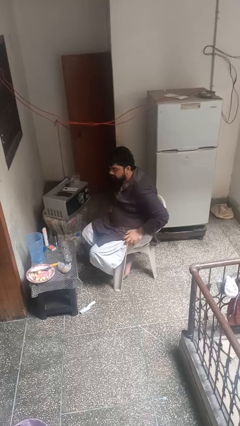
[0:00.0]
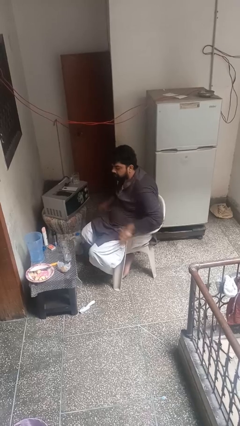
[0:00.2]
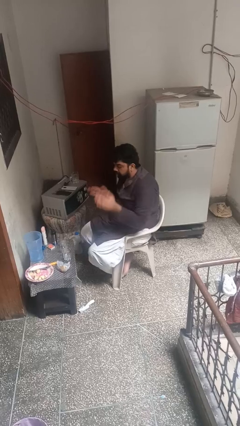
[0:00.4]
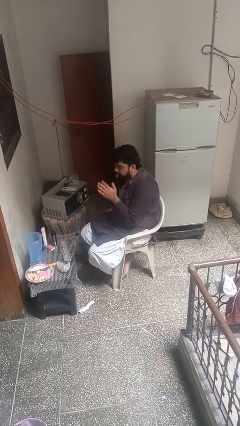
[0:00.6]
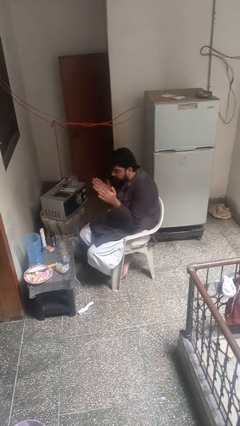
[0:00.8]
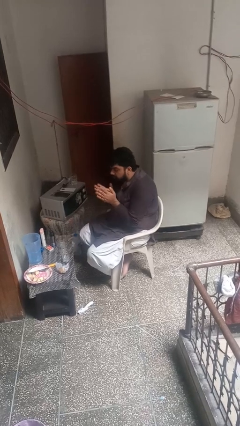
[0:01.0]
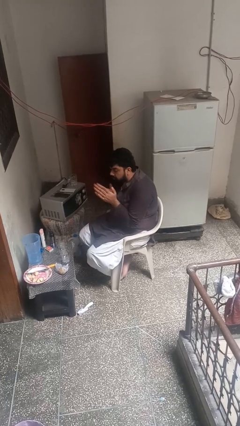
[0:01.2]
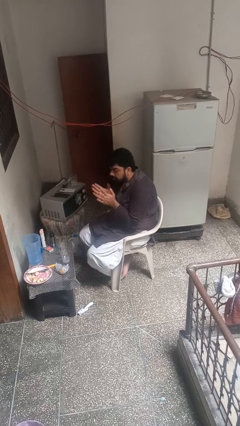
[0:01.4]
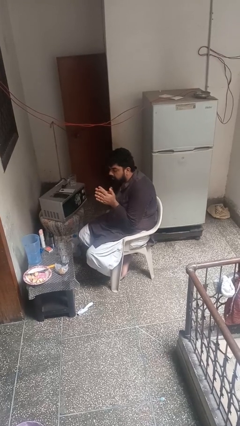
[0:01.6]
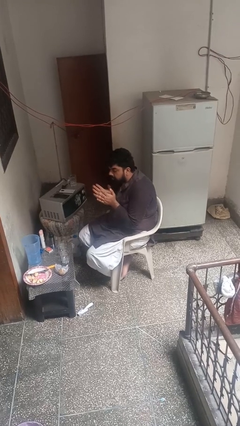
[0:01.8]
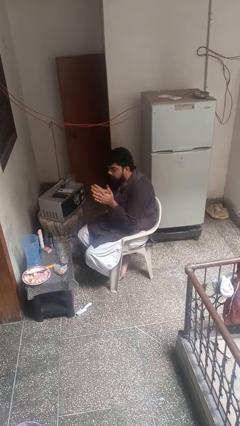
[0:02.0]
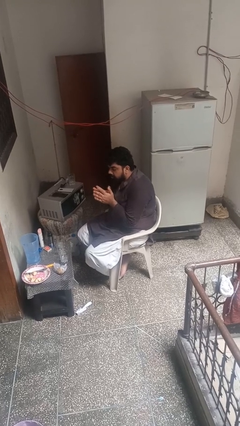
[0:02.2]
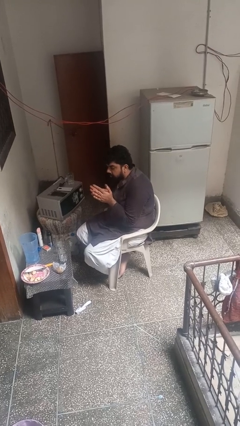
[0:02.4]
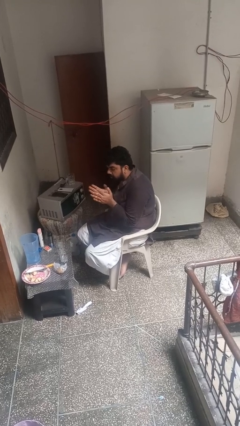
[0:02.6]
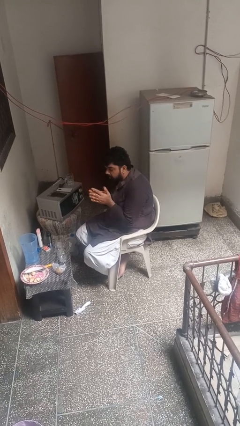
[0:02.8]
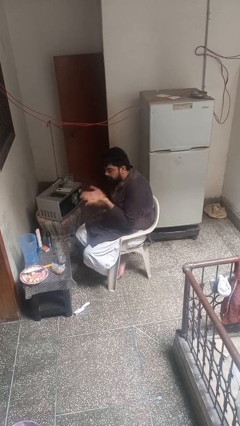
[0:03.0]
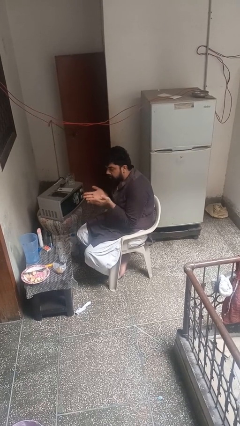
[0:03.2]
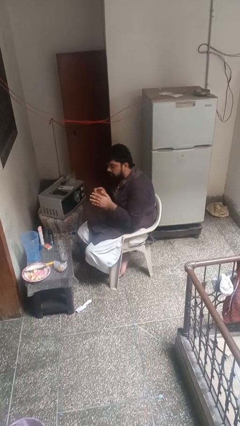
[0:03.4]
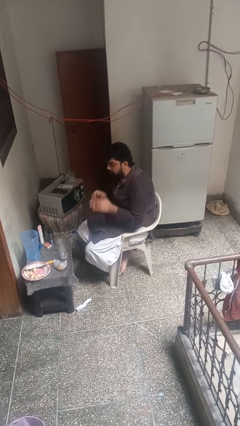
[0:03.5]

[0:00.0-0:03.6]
person claps hands

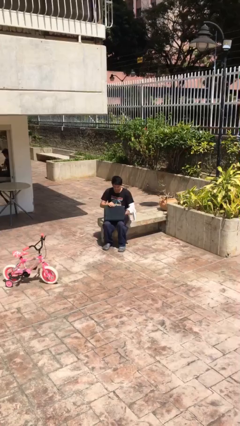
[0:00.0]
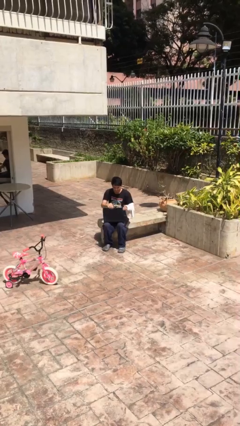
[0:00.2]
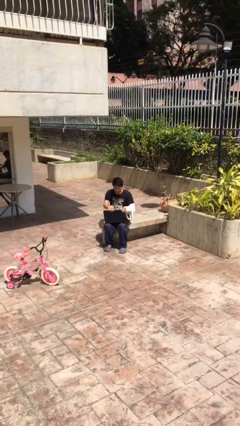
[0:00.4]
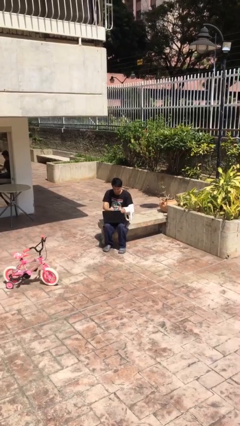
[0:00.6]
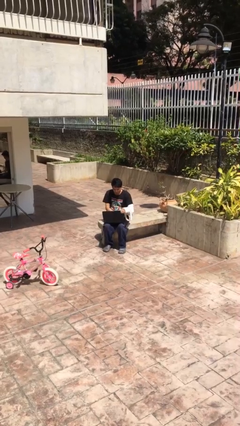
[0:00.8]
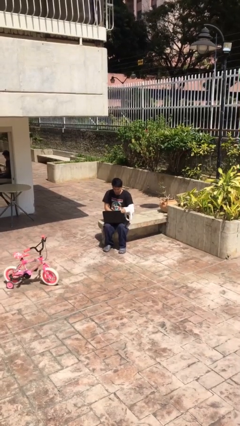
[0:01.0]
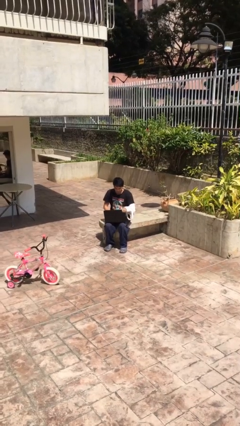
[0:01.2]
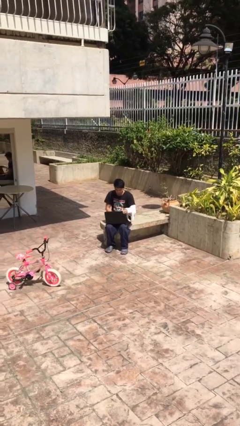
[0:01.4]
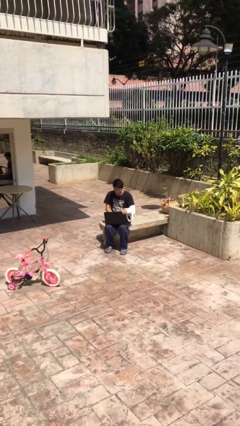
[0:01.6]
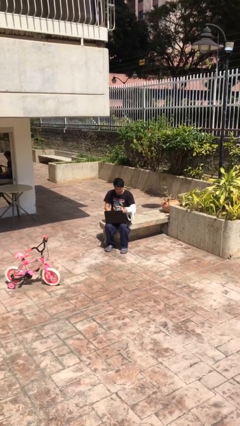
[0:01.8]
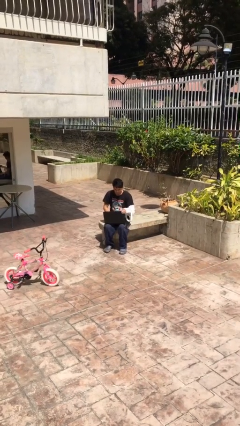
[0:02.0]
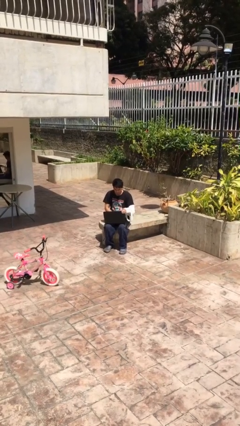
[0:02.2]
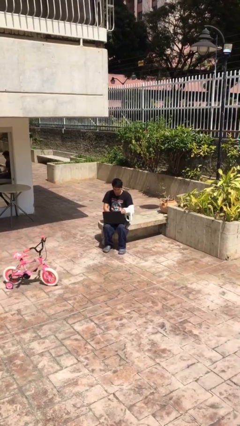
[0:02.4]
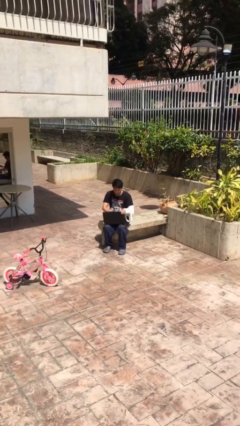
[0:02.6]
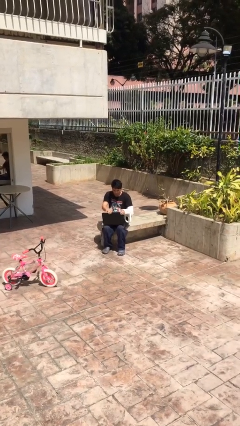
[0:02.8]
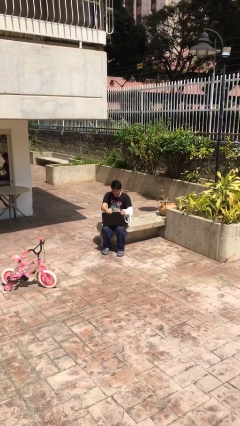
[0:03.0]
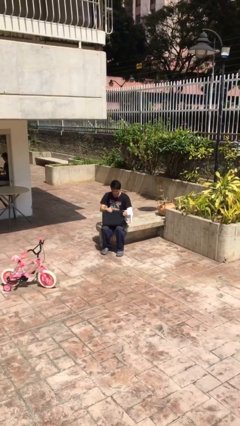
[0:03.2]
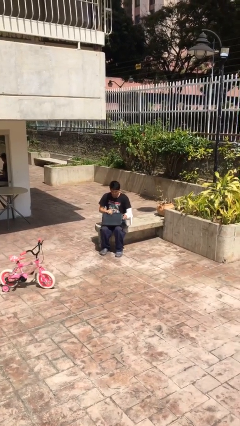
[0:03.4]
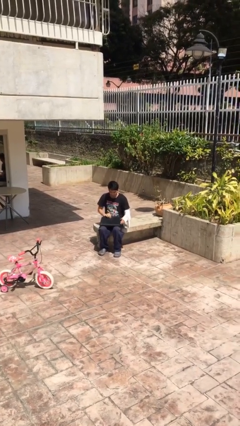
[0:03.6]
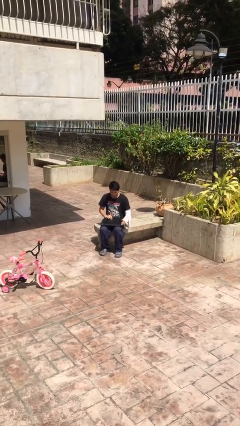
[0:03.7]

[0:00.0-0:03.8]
person interacts with laptop

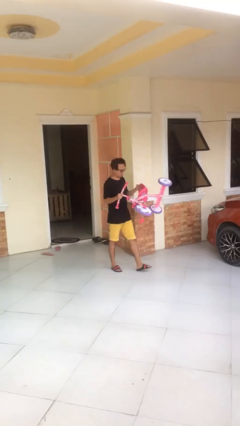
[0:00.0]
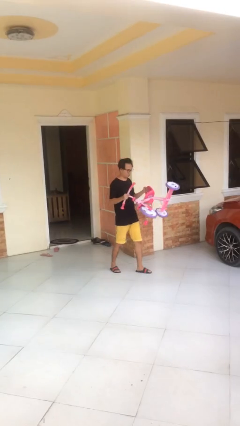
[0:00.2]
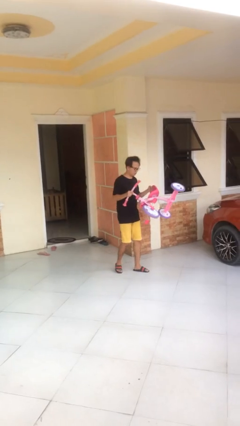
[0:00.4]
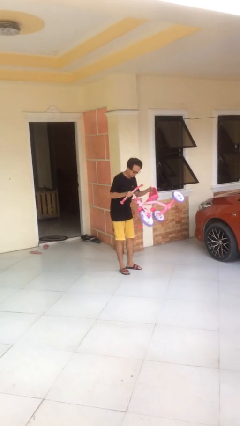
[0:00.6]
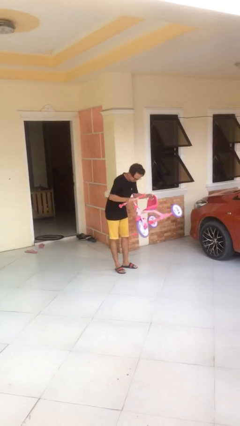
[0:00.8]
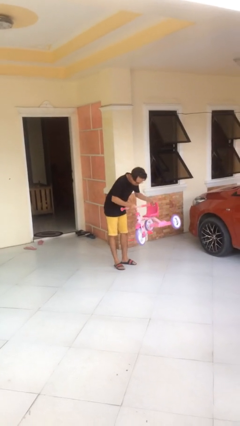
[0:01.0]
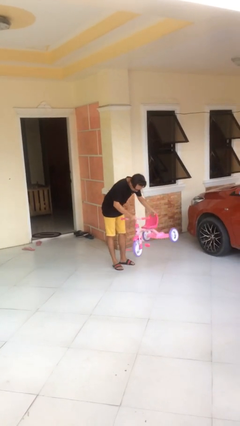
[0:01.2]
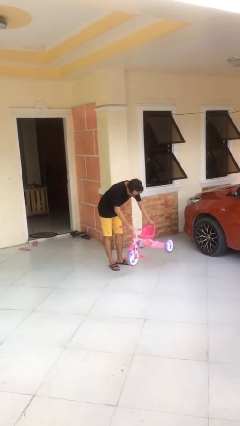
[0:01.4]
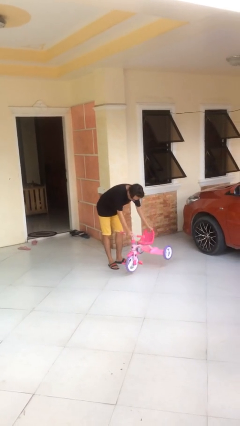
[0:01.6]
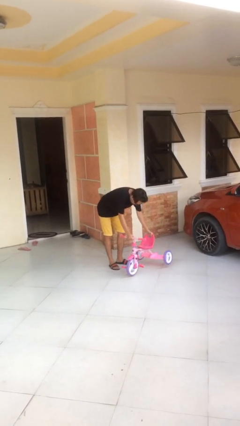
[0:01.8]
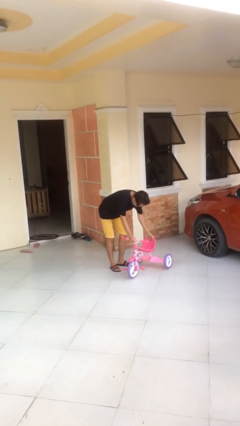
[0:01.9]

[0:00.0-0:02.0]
person puts down object on floor

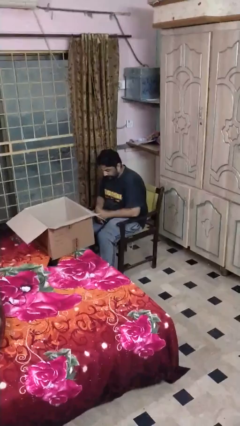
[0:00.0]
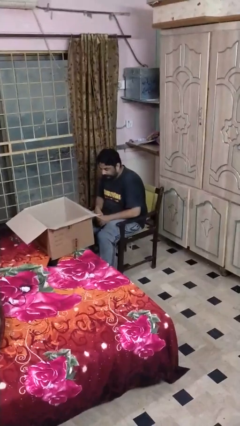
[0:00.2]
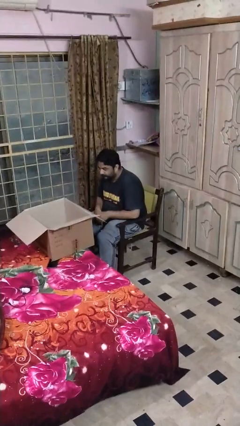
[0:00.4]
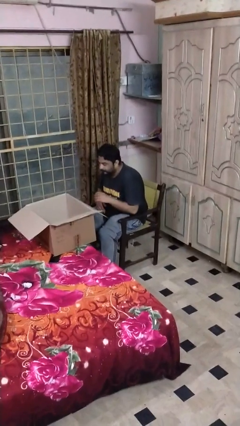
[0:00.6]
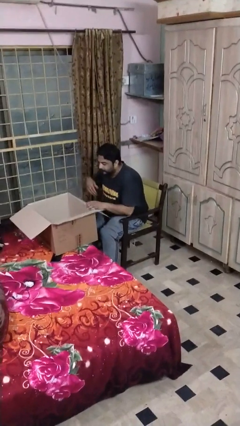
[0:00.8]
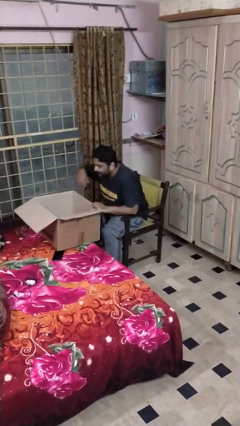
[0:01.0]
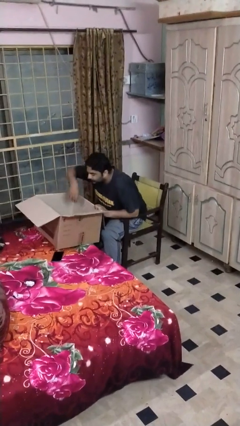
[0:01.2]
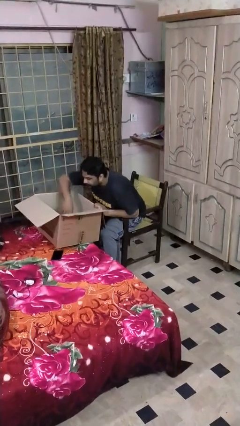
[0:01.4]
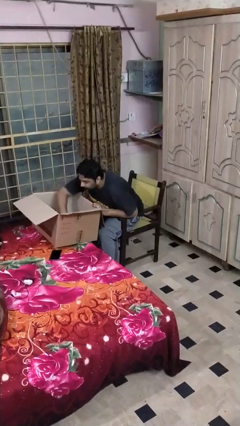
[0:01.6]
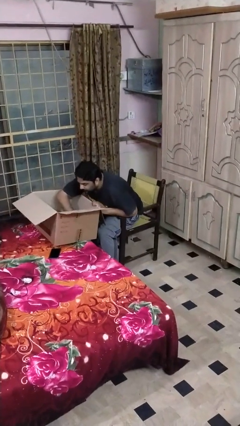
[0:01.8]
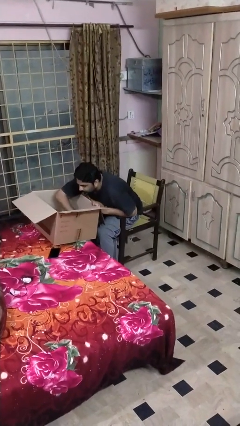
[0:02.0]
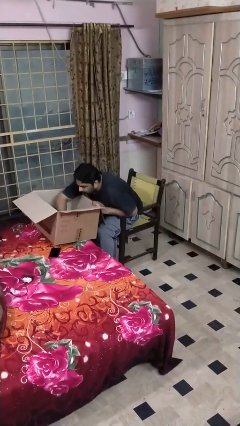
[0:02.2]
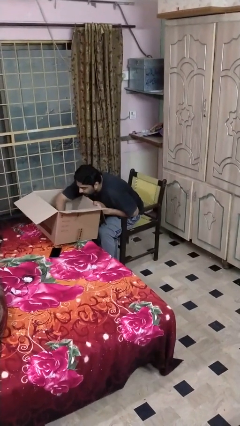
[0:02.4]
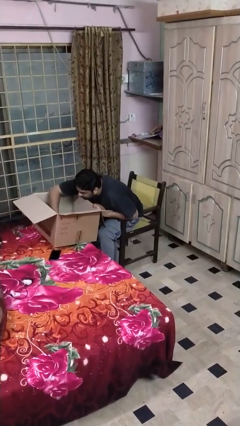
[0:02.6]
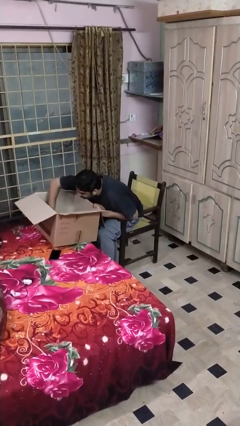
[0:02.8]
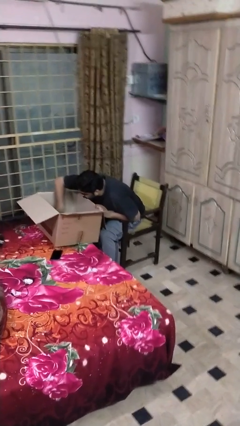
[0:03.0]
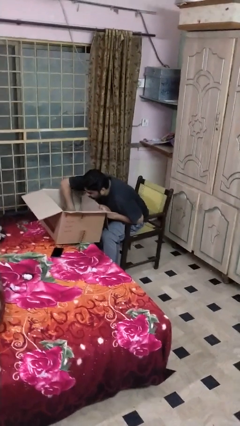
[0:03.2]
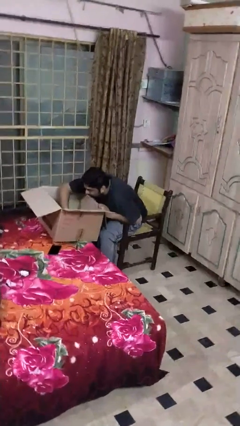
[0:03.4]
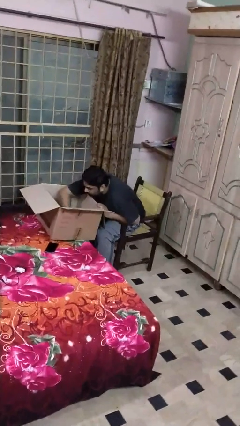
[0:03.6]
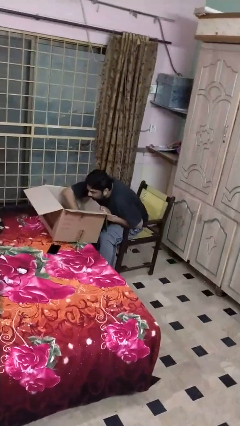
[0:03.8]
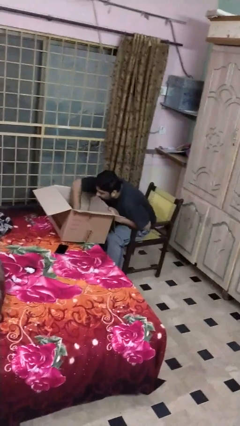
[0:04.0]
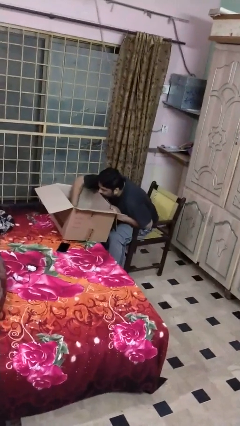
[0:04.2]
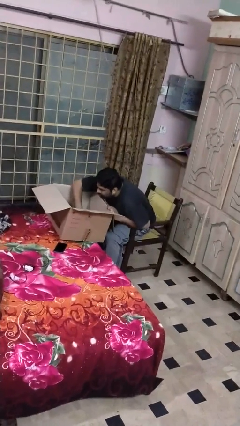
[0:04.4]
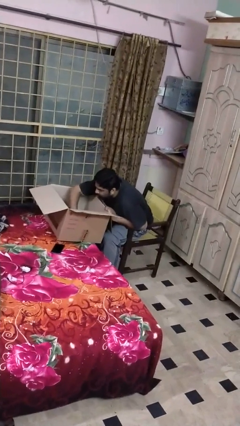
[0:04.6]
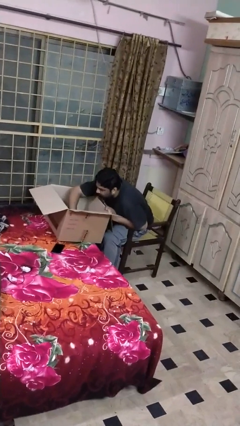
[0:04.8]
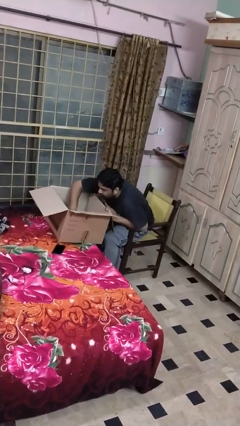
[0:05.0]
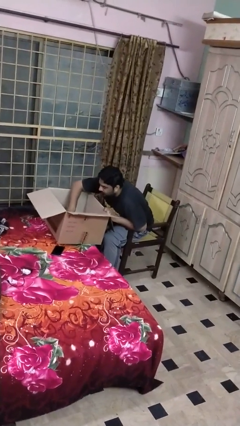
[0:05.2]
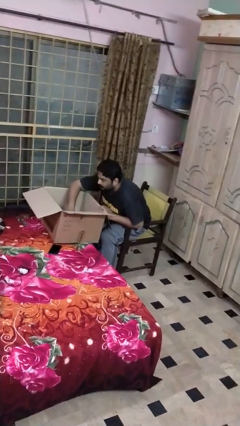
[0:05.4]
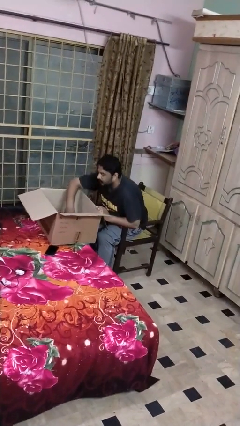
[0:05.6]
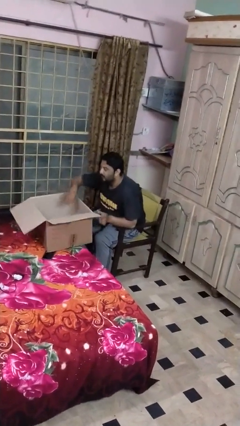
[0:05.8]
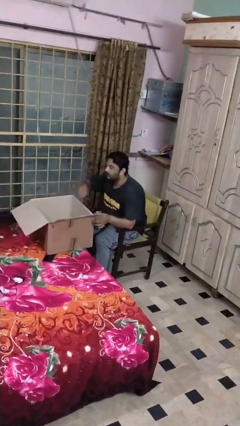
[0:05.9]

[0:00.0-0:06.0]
person searches in box

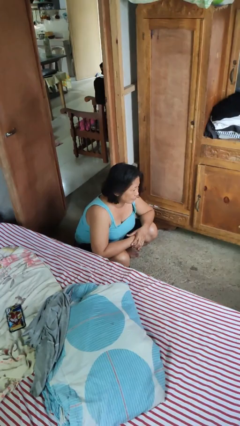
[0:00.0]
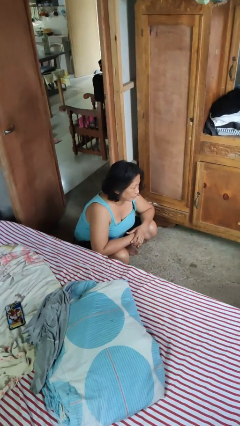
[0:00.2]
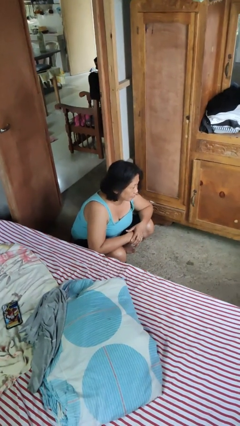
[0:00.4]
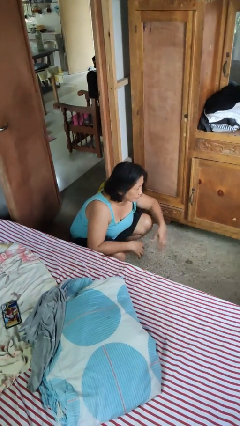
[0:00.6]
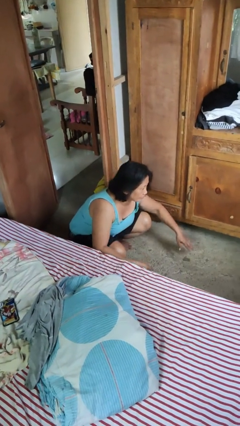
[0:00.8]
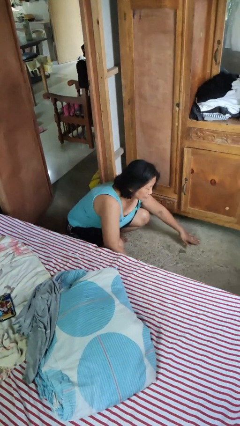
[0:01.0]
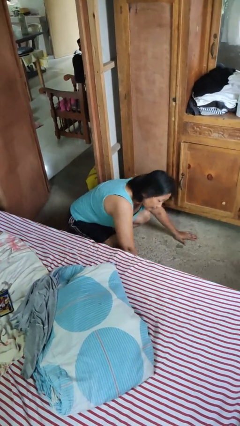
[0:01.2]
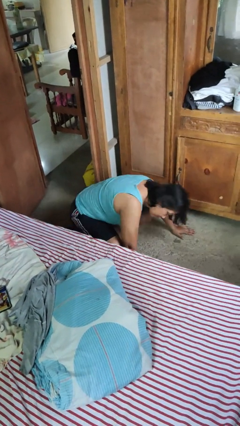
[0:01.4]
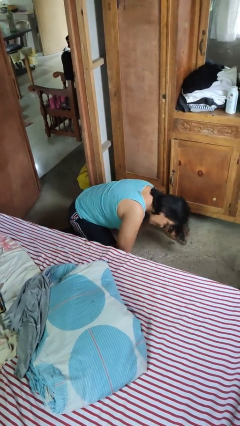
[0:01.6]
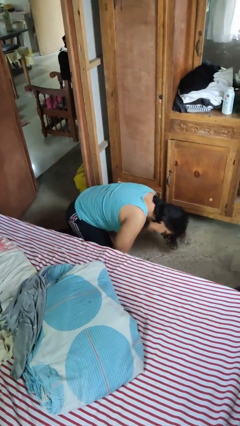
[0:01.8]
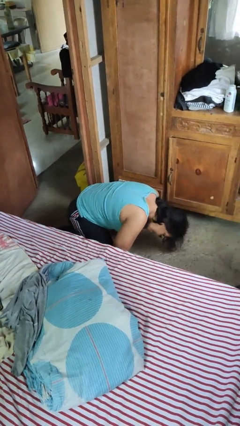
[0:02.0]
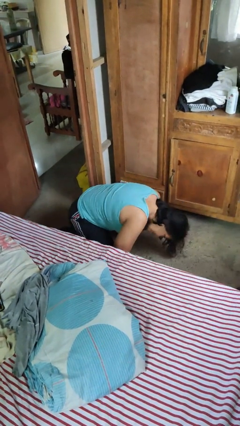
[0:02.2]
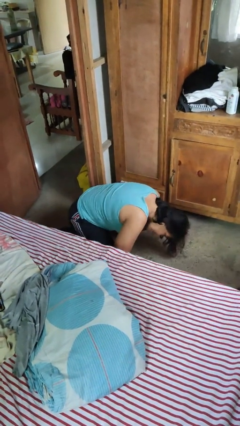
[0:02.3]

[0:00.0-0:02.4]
person searches under bed
